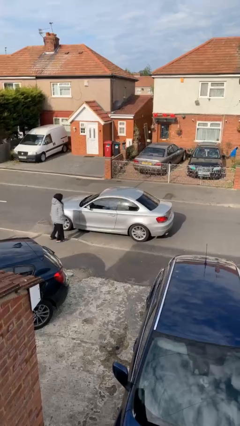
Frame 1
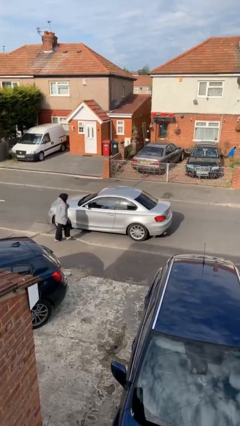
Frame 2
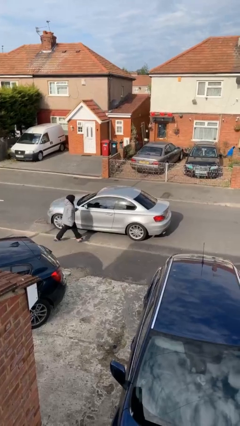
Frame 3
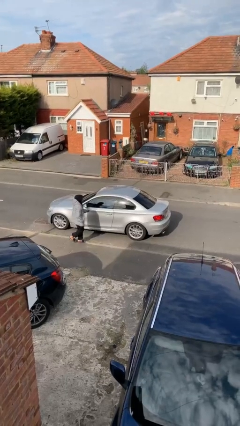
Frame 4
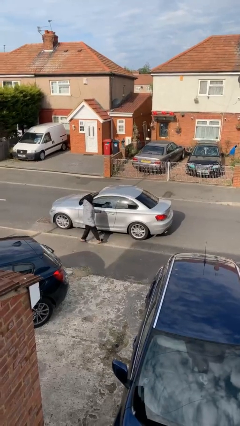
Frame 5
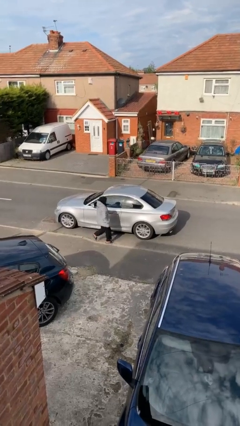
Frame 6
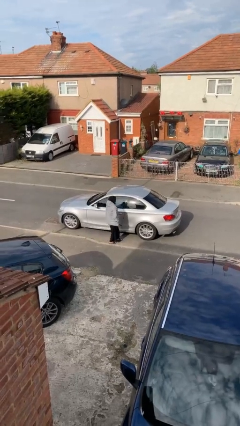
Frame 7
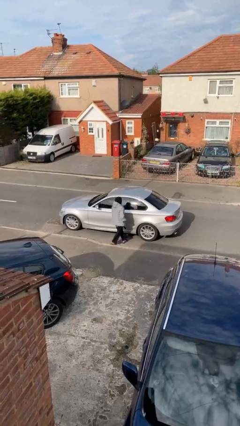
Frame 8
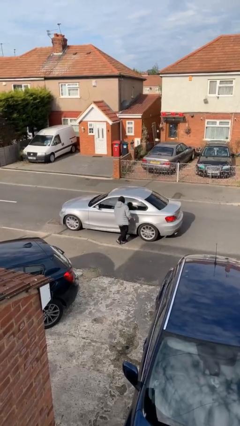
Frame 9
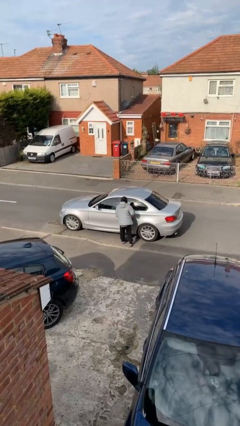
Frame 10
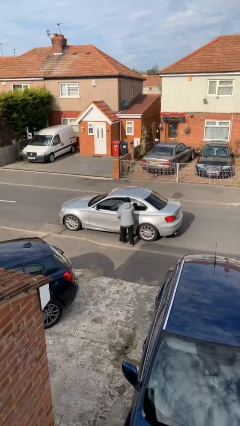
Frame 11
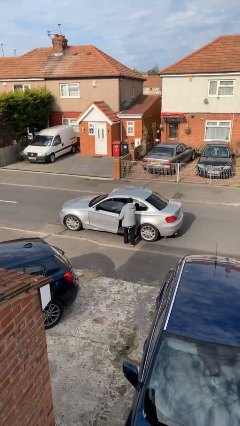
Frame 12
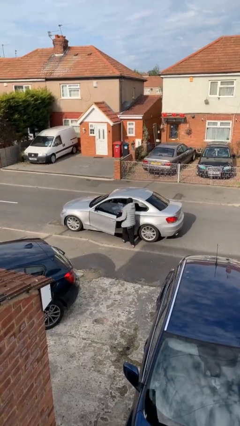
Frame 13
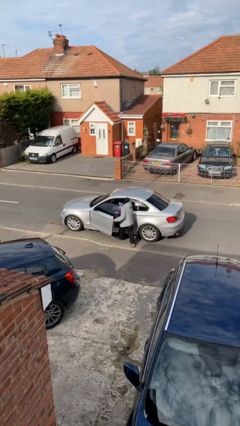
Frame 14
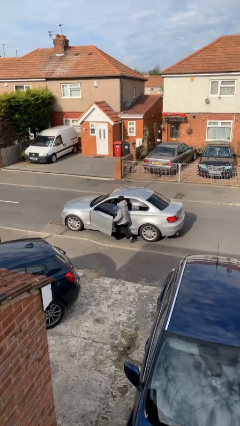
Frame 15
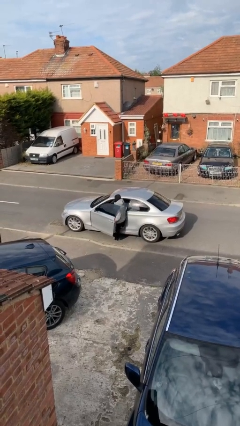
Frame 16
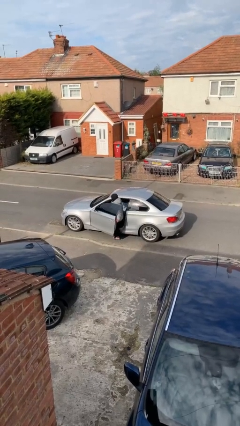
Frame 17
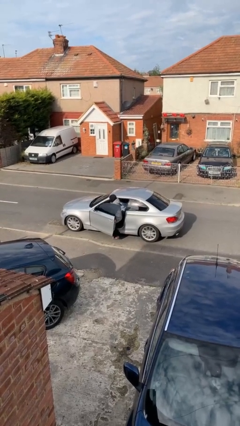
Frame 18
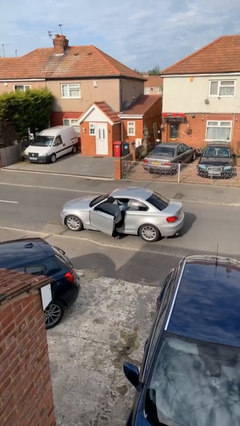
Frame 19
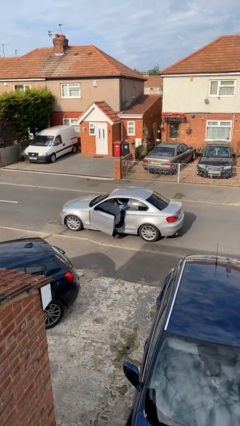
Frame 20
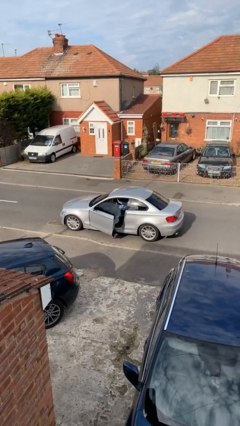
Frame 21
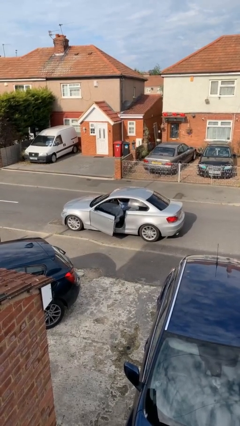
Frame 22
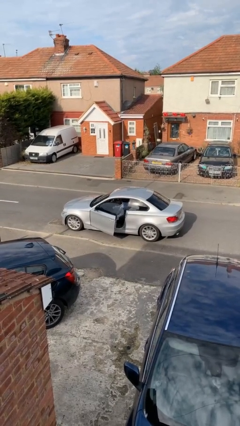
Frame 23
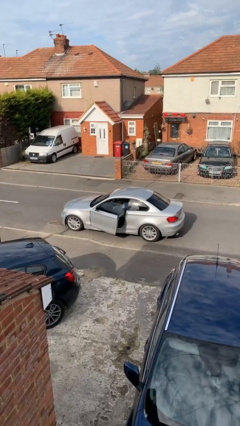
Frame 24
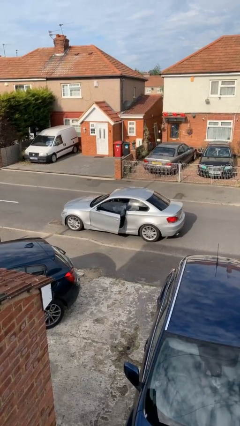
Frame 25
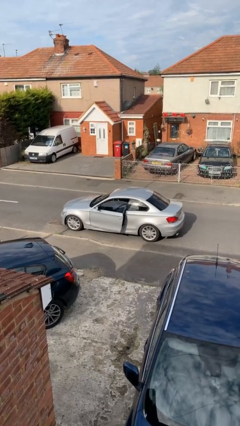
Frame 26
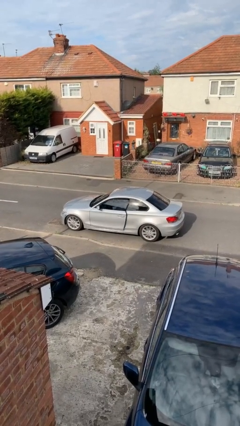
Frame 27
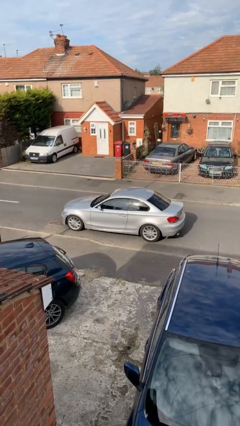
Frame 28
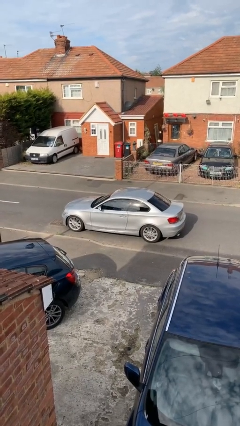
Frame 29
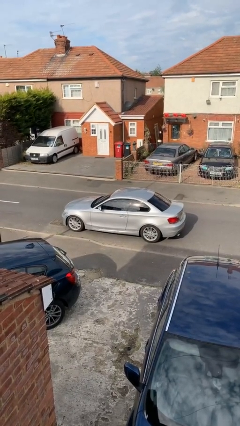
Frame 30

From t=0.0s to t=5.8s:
car picks up person

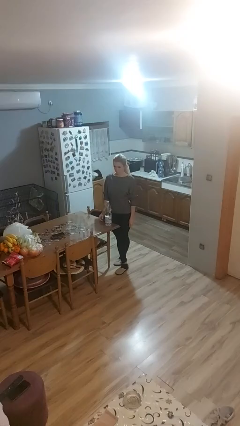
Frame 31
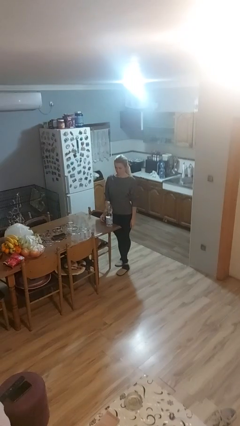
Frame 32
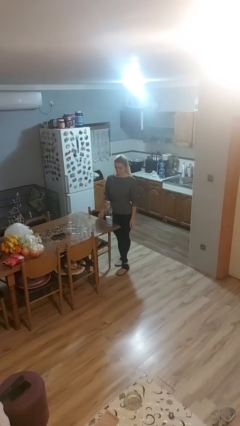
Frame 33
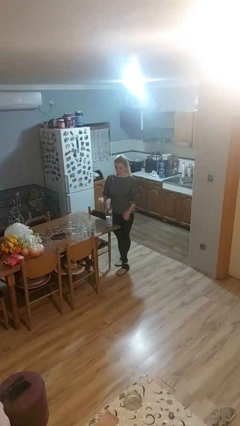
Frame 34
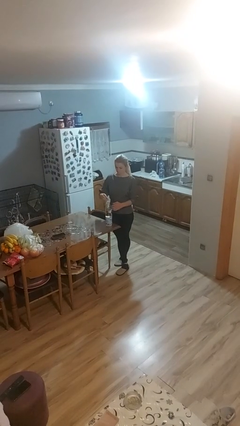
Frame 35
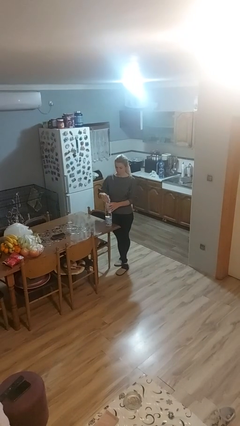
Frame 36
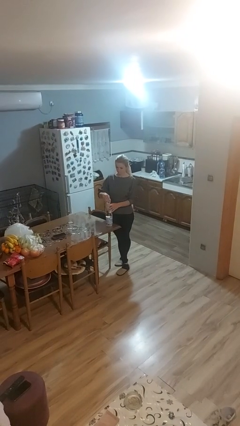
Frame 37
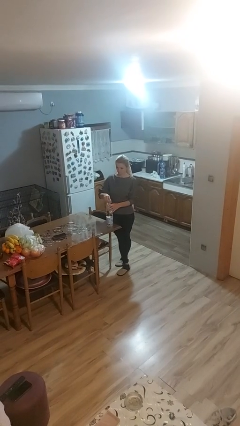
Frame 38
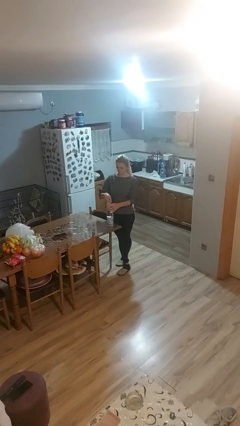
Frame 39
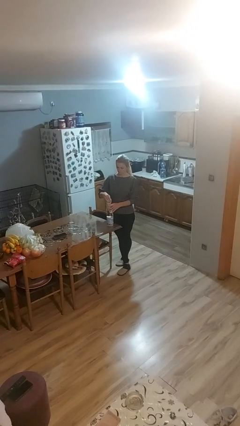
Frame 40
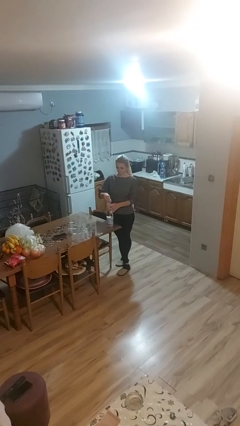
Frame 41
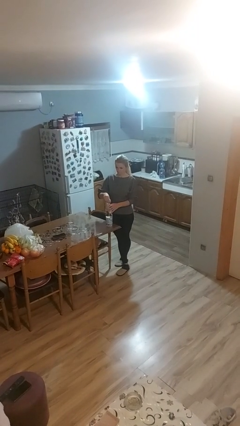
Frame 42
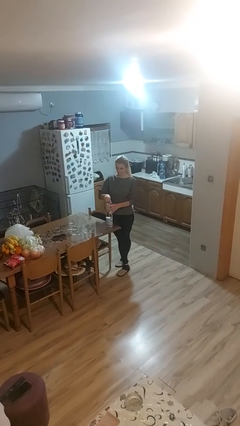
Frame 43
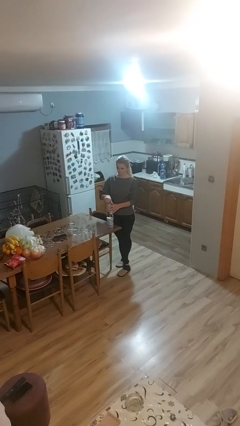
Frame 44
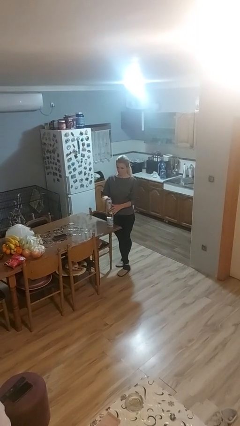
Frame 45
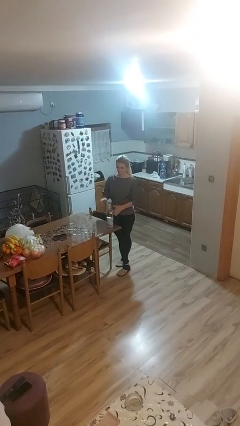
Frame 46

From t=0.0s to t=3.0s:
person screws lid to bottle

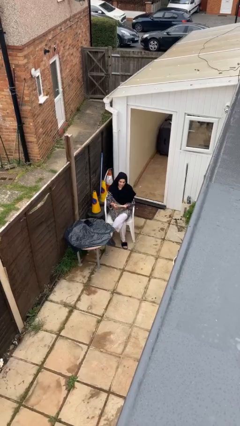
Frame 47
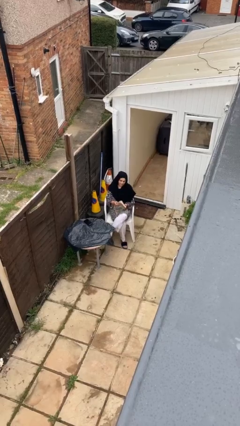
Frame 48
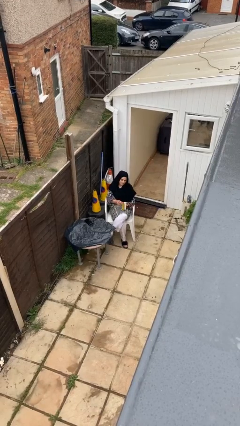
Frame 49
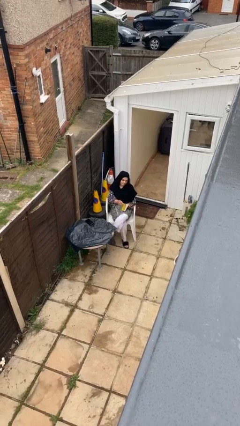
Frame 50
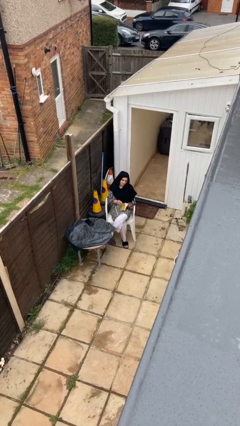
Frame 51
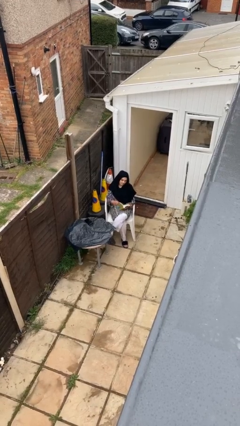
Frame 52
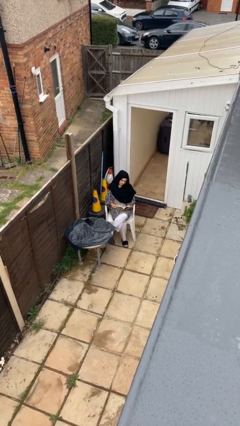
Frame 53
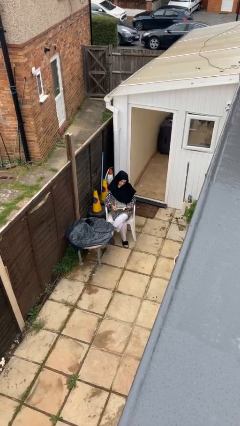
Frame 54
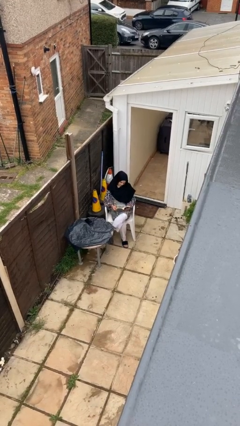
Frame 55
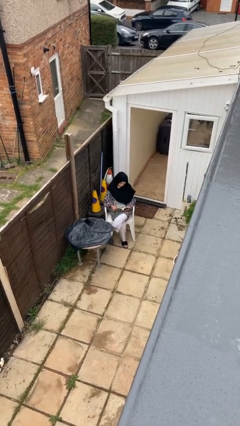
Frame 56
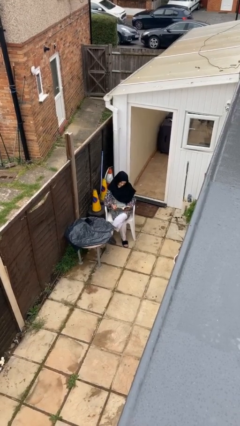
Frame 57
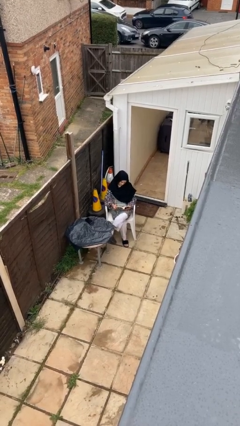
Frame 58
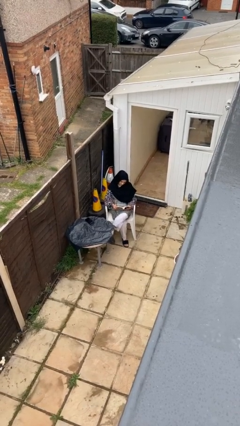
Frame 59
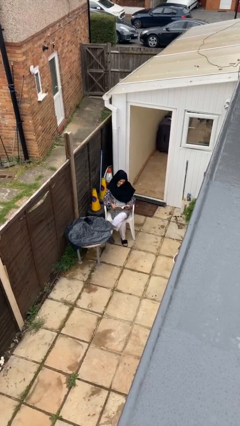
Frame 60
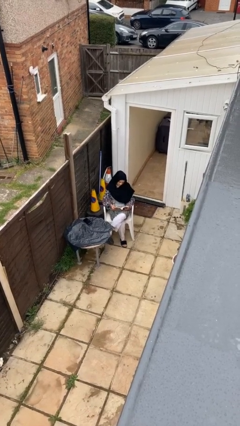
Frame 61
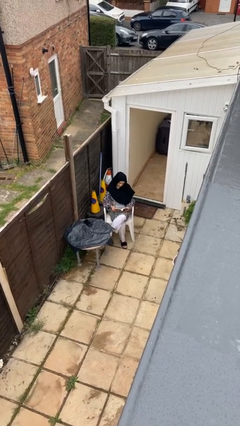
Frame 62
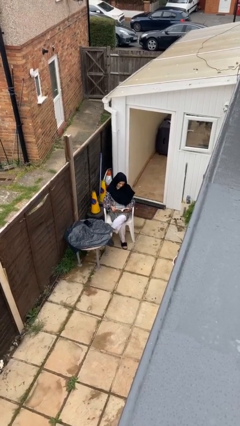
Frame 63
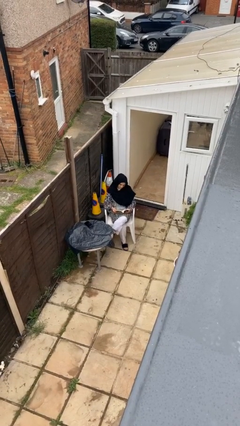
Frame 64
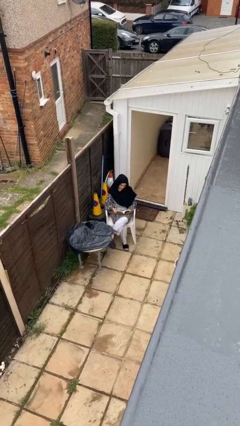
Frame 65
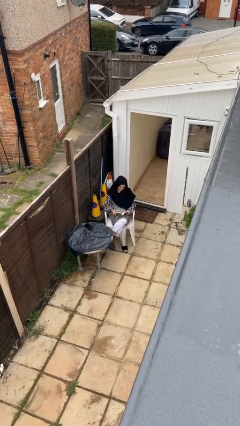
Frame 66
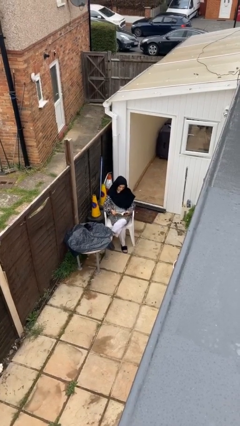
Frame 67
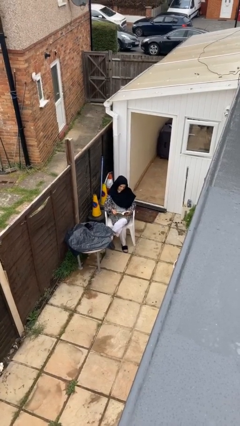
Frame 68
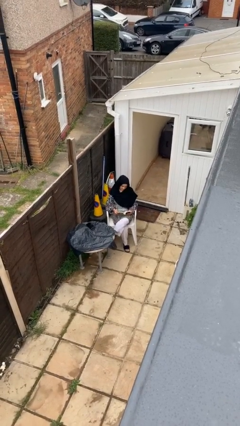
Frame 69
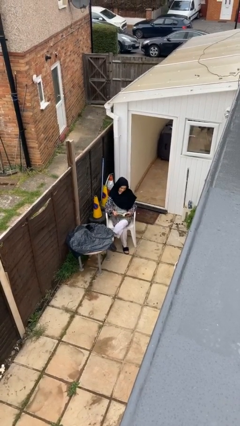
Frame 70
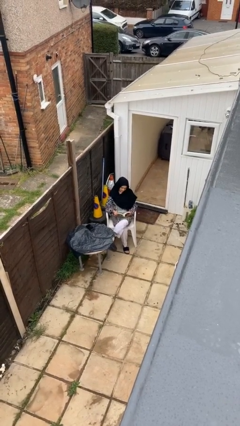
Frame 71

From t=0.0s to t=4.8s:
person reads document

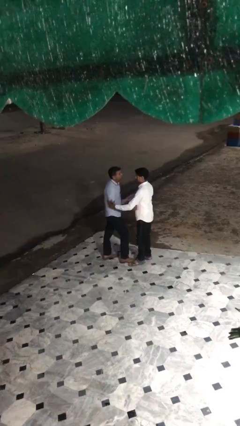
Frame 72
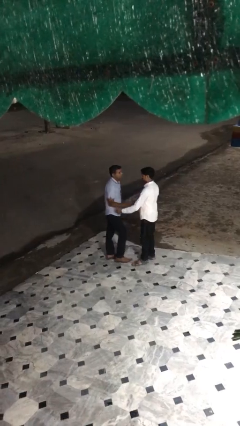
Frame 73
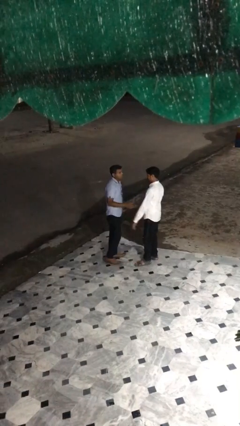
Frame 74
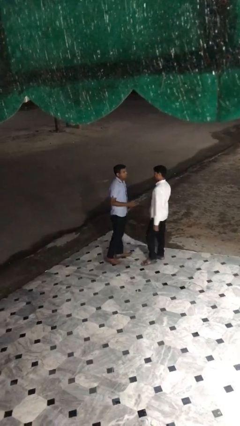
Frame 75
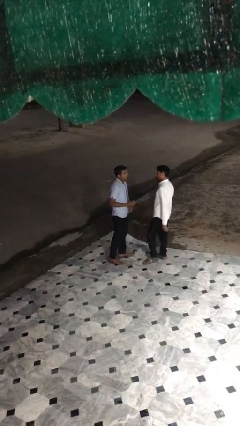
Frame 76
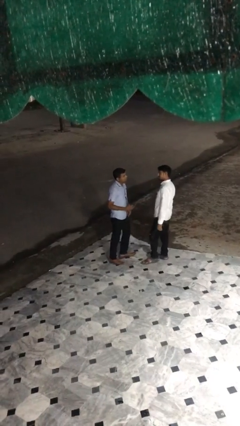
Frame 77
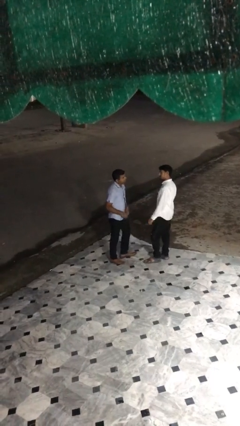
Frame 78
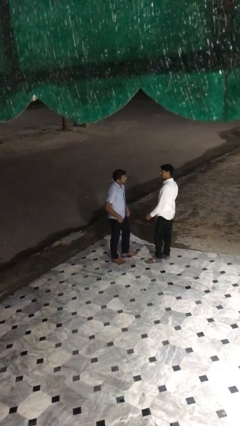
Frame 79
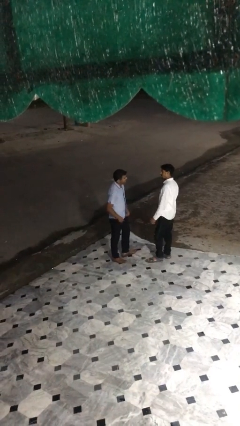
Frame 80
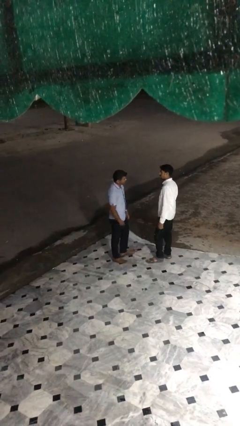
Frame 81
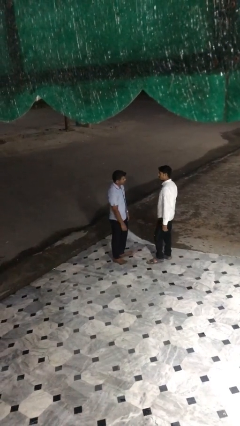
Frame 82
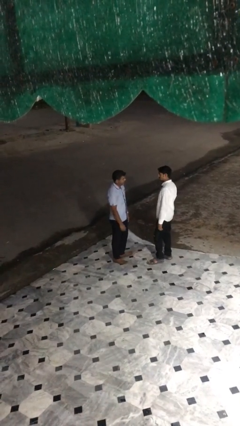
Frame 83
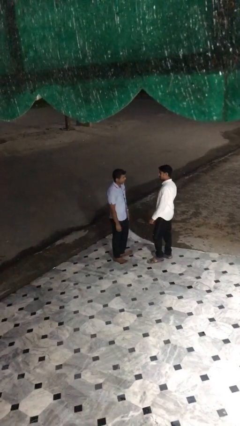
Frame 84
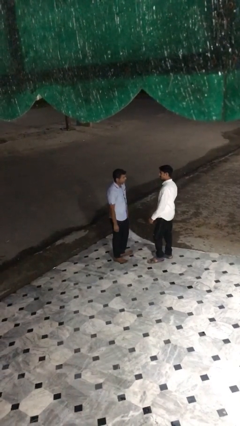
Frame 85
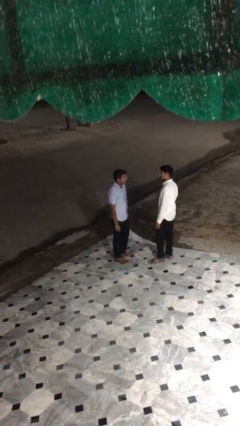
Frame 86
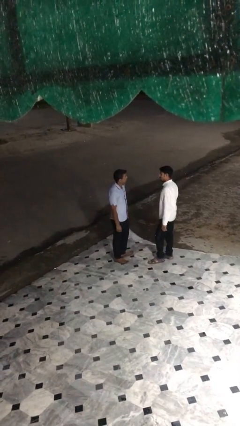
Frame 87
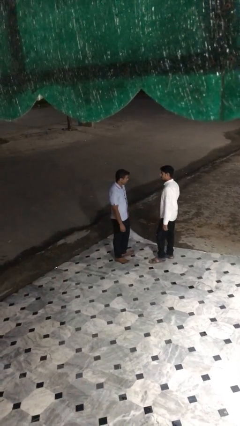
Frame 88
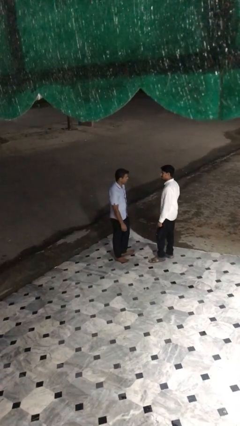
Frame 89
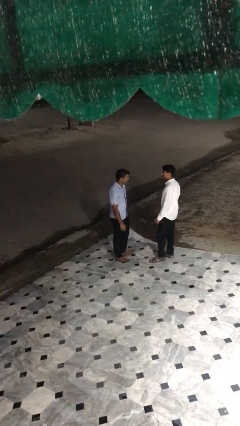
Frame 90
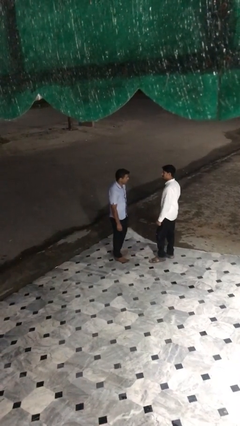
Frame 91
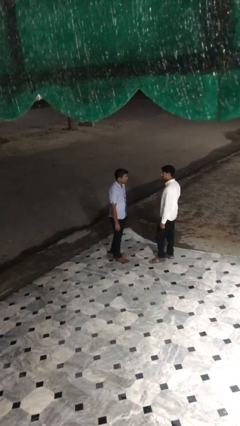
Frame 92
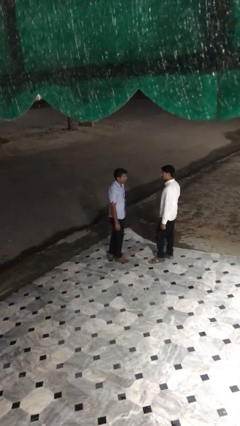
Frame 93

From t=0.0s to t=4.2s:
person talks to person
